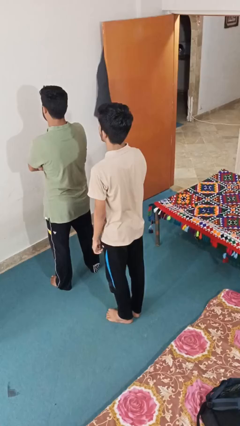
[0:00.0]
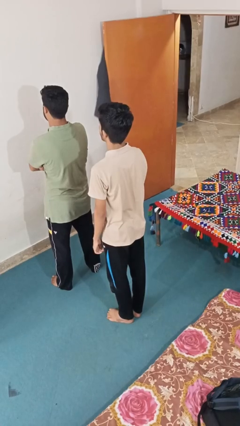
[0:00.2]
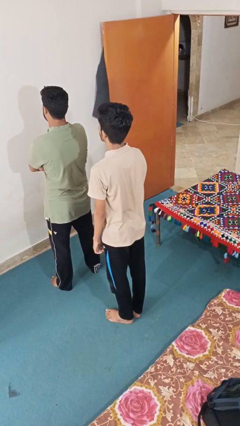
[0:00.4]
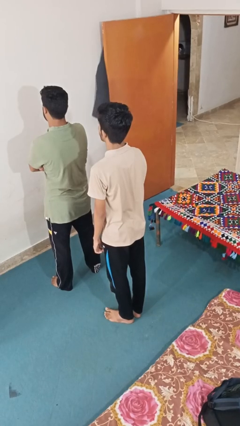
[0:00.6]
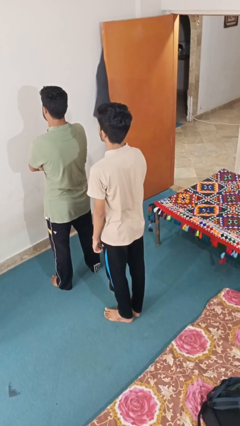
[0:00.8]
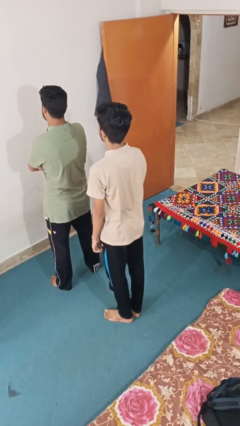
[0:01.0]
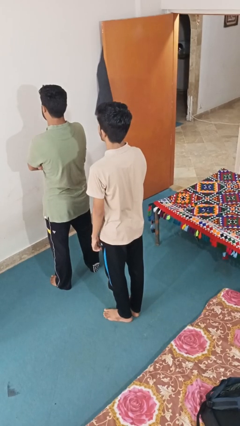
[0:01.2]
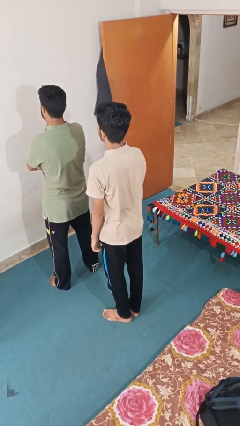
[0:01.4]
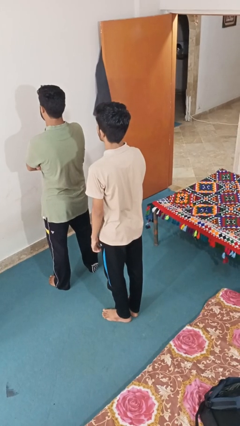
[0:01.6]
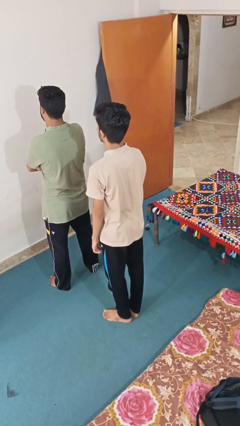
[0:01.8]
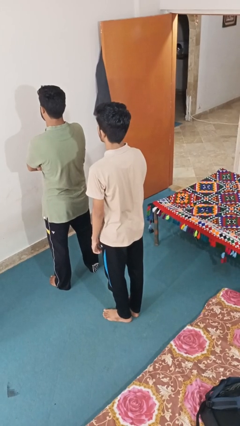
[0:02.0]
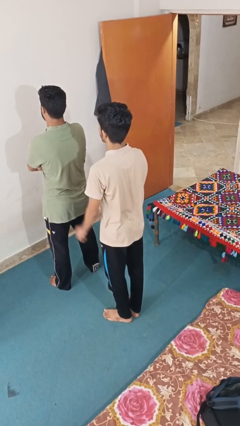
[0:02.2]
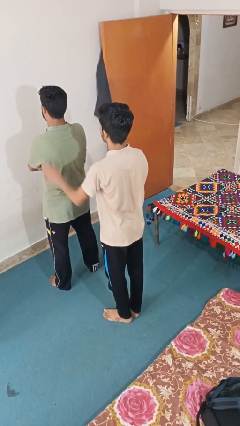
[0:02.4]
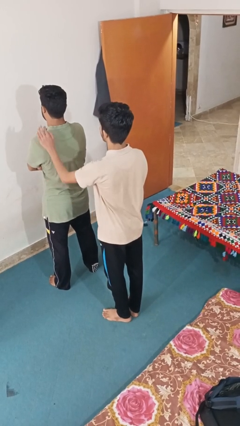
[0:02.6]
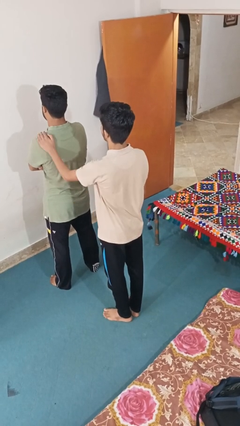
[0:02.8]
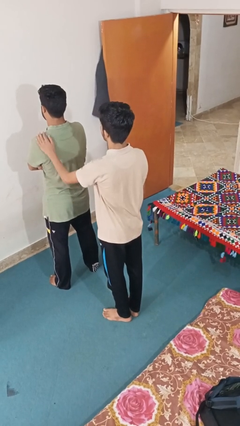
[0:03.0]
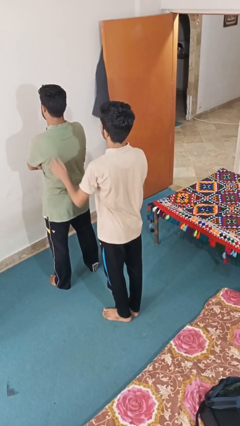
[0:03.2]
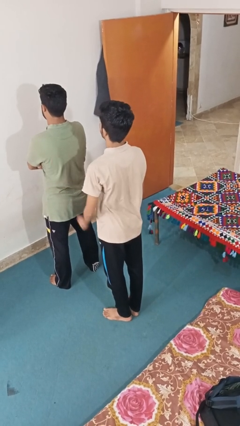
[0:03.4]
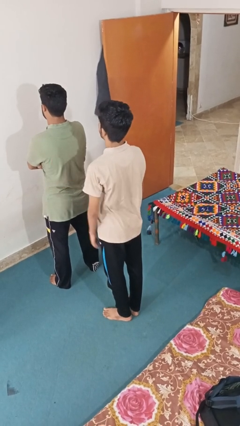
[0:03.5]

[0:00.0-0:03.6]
person touches back of person

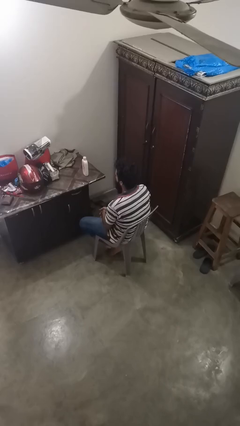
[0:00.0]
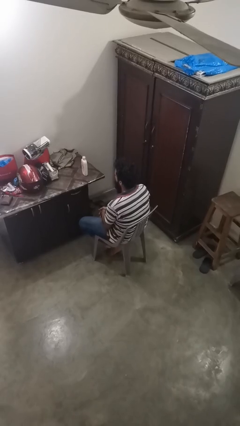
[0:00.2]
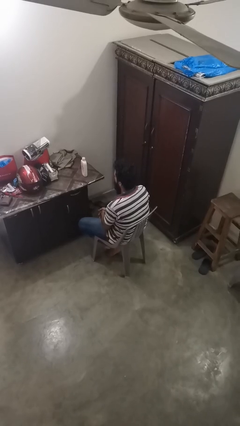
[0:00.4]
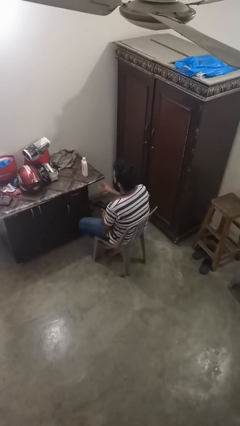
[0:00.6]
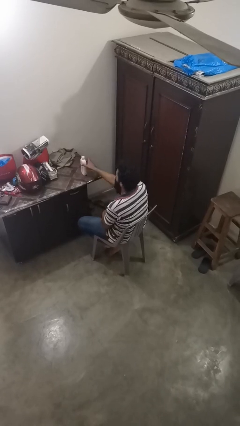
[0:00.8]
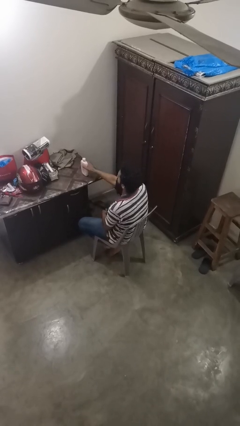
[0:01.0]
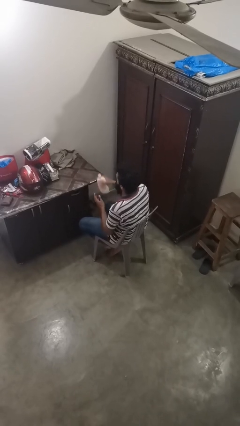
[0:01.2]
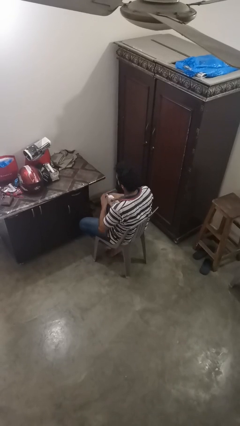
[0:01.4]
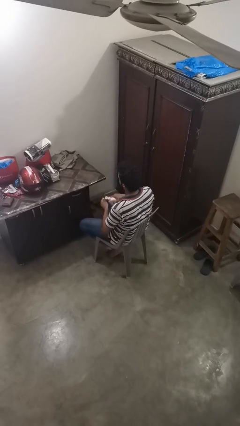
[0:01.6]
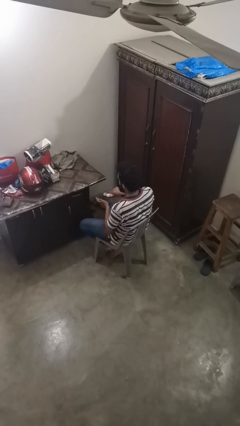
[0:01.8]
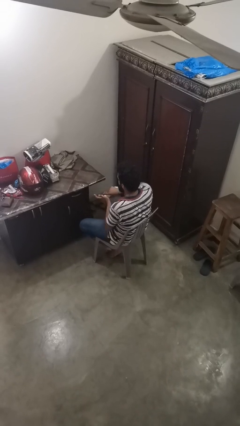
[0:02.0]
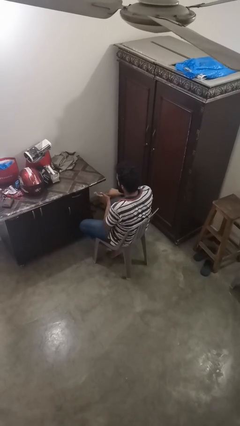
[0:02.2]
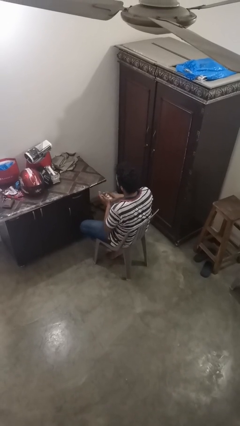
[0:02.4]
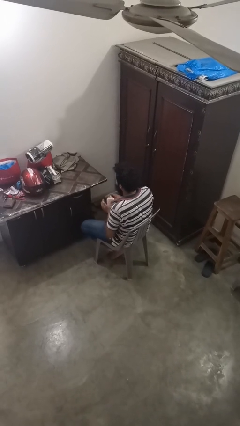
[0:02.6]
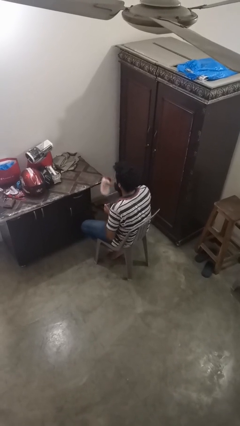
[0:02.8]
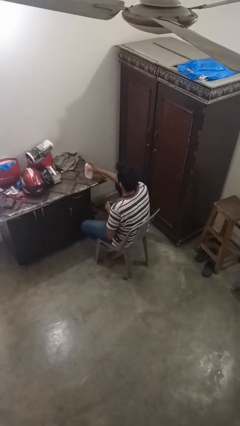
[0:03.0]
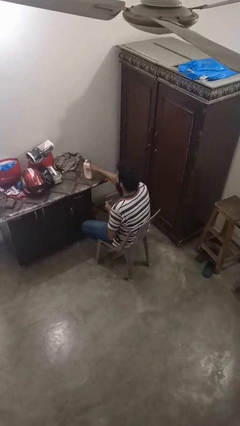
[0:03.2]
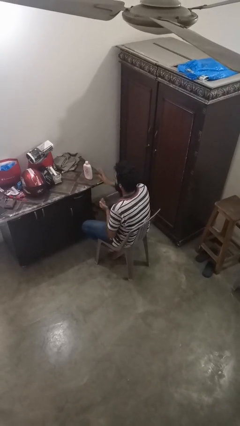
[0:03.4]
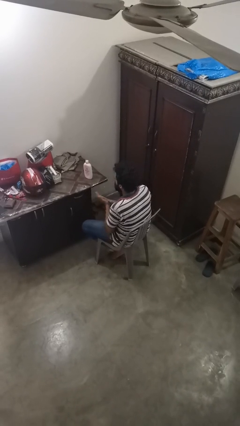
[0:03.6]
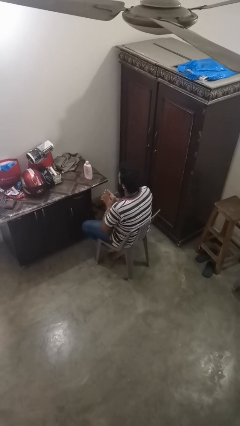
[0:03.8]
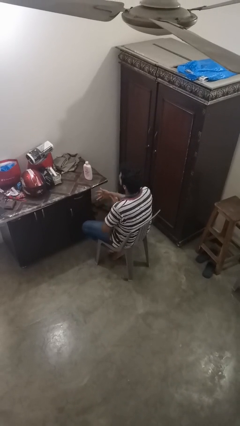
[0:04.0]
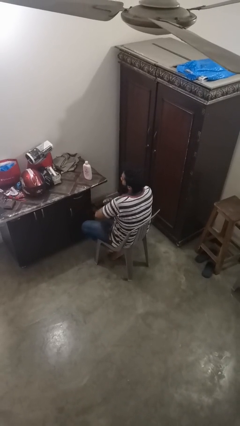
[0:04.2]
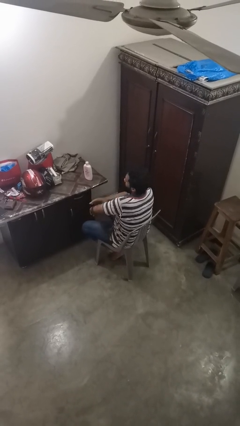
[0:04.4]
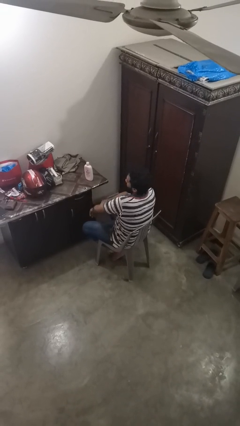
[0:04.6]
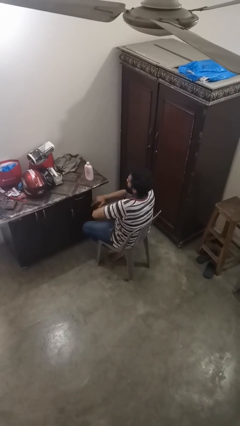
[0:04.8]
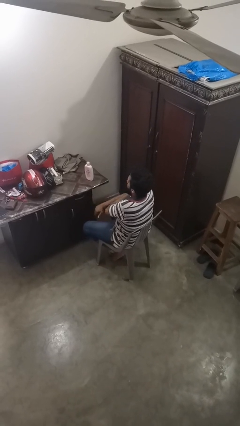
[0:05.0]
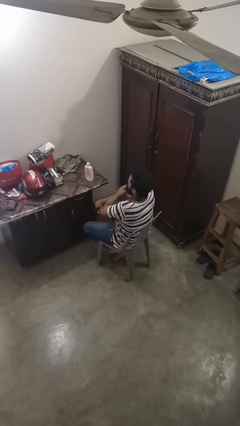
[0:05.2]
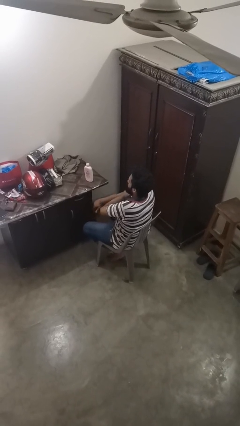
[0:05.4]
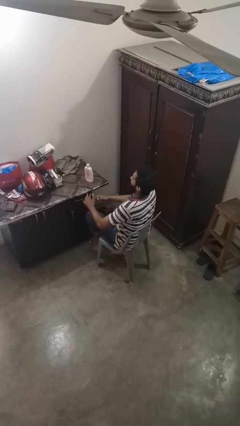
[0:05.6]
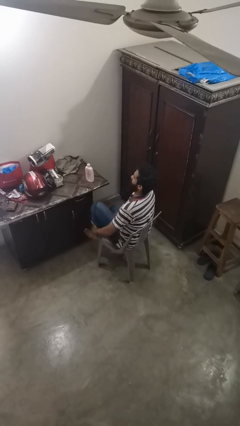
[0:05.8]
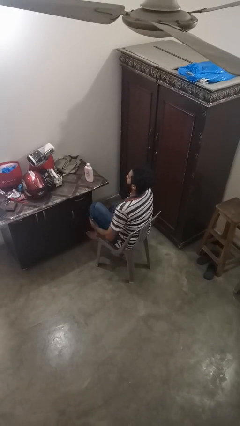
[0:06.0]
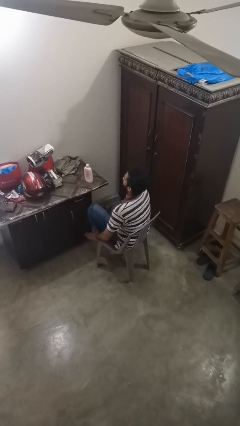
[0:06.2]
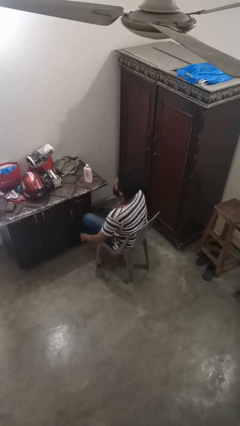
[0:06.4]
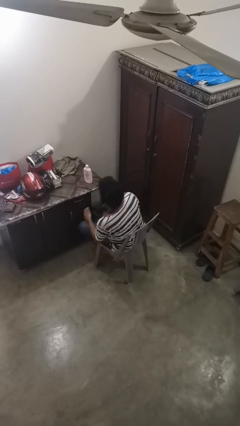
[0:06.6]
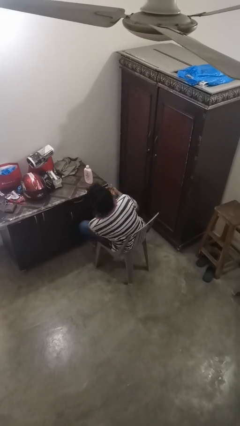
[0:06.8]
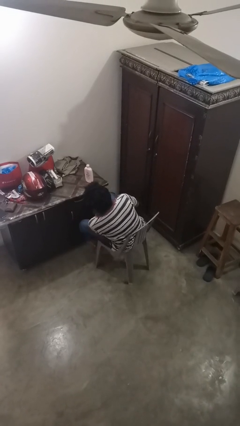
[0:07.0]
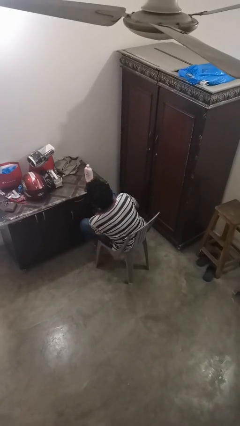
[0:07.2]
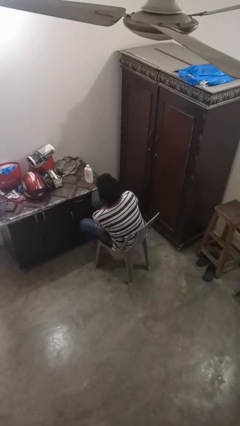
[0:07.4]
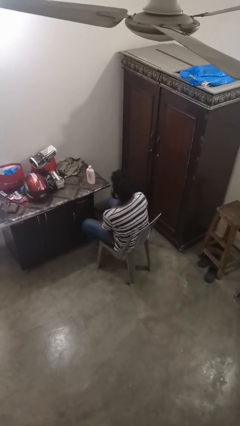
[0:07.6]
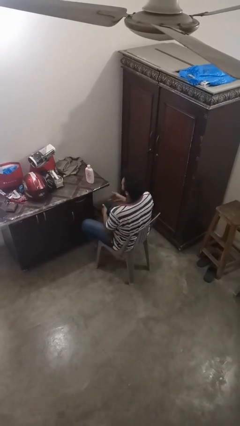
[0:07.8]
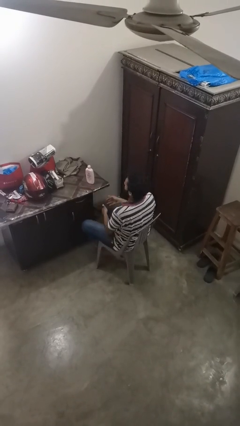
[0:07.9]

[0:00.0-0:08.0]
person applies sunscreen

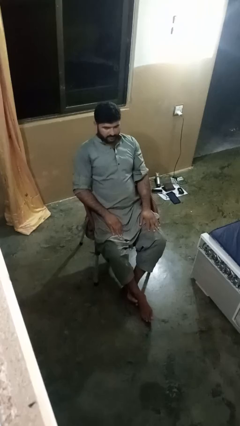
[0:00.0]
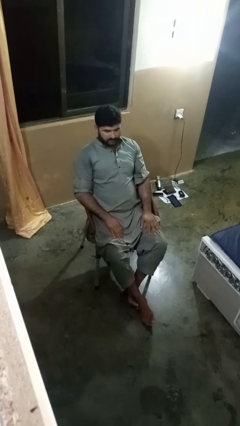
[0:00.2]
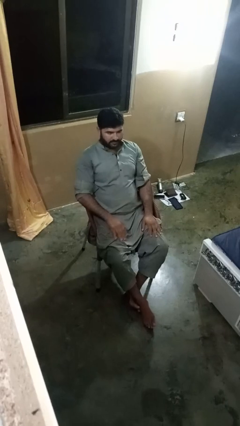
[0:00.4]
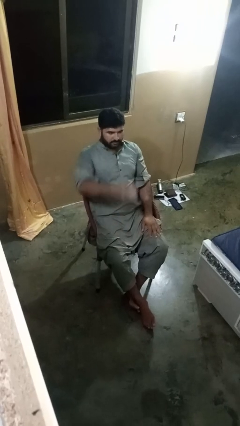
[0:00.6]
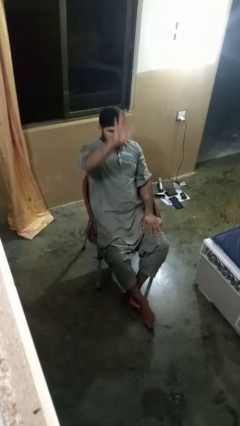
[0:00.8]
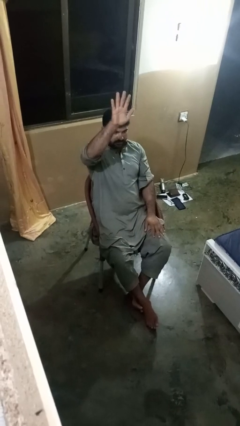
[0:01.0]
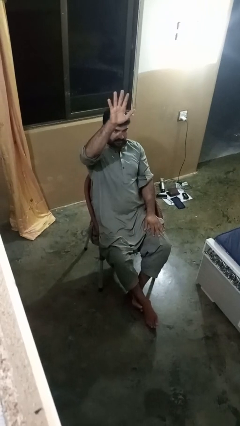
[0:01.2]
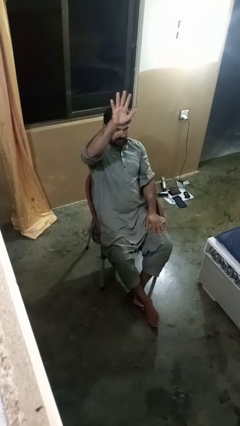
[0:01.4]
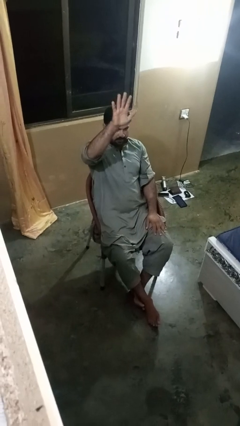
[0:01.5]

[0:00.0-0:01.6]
person gestures number five

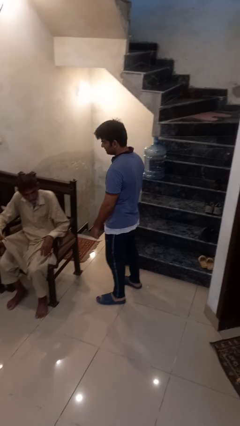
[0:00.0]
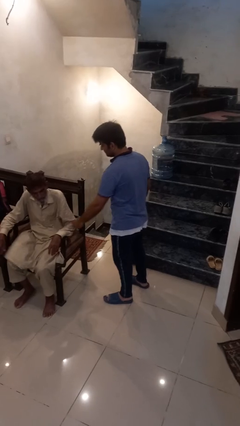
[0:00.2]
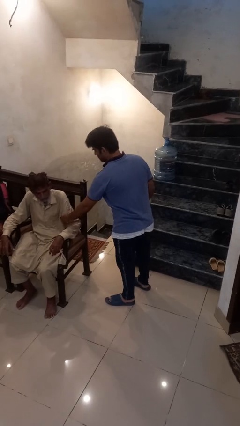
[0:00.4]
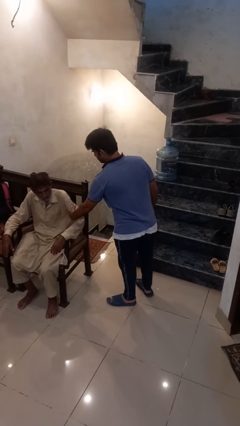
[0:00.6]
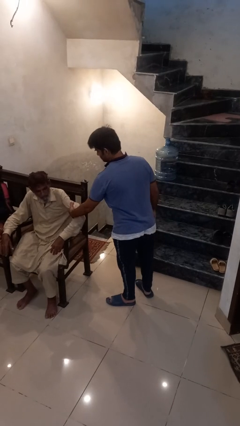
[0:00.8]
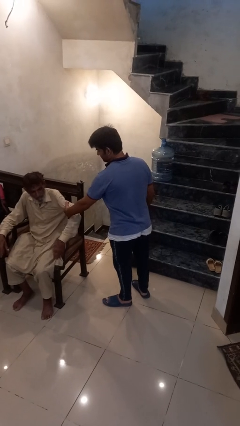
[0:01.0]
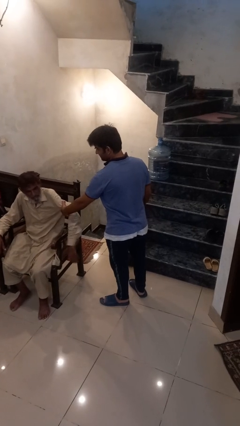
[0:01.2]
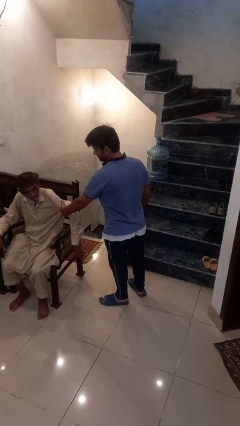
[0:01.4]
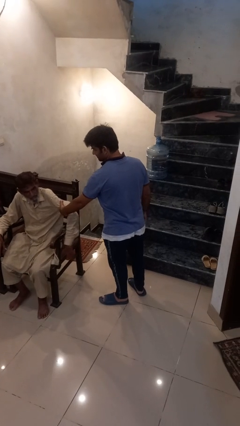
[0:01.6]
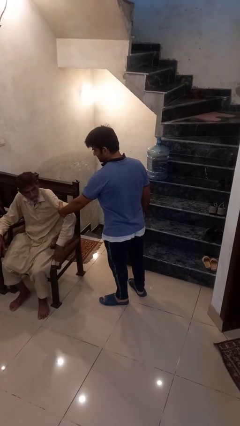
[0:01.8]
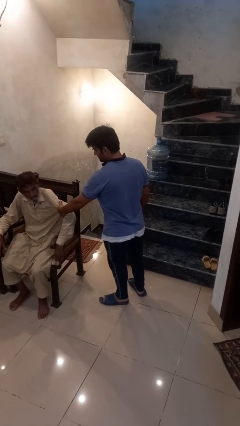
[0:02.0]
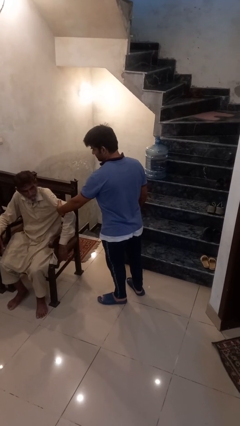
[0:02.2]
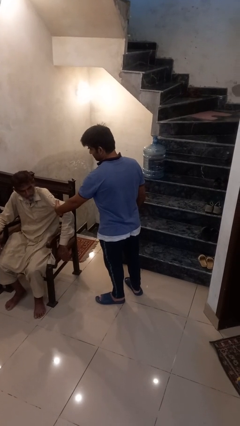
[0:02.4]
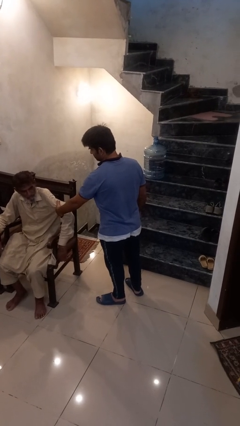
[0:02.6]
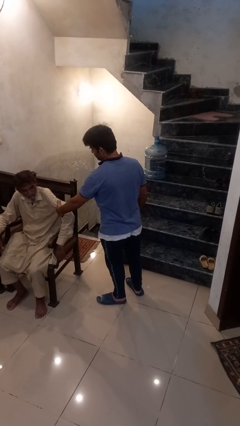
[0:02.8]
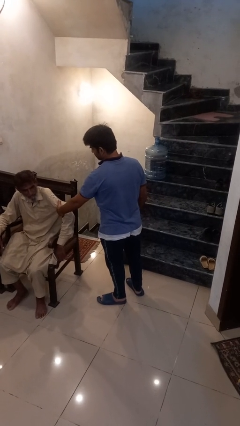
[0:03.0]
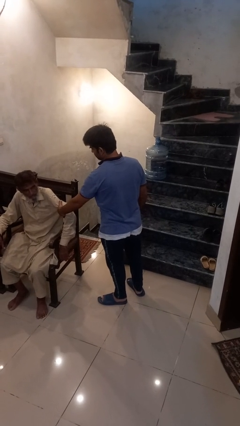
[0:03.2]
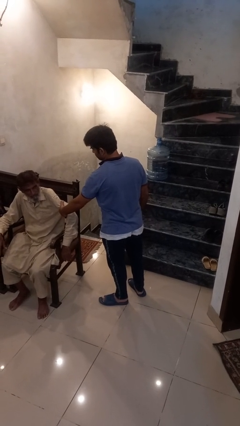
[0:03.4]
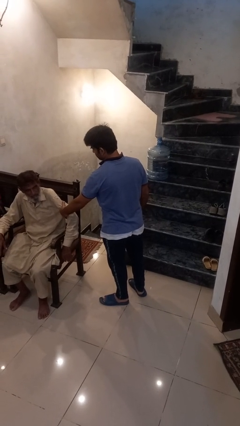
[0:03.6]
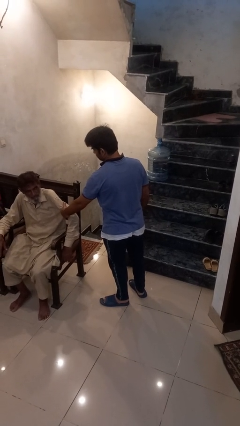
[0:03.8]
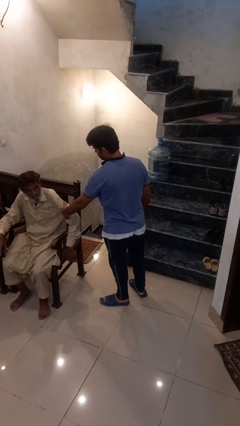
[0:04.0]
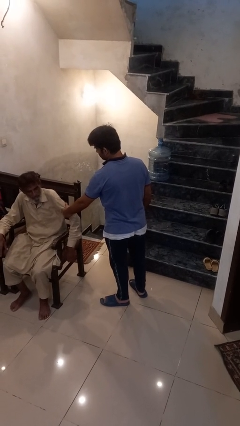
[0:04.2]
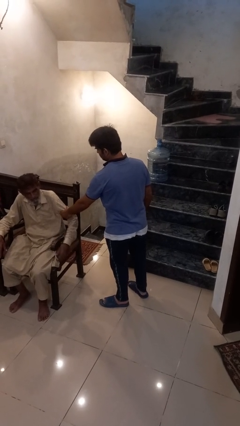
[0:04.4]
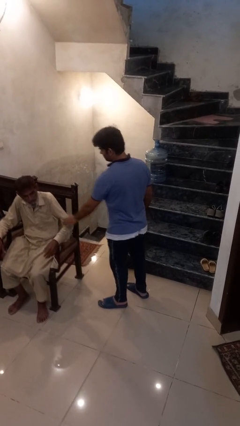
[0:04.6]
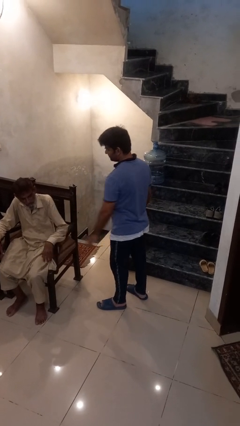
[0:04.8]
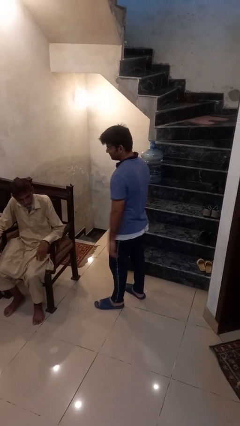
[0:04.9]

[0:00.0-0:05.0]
person grabs person by bicep
